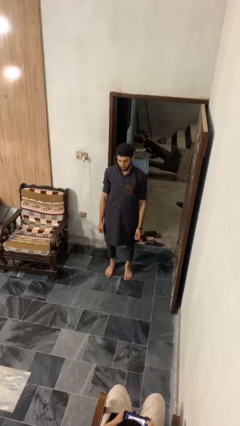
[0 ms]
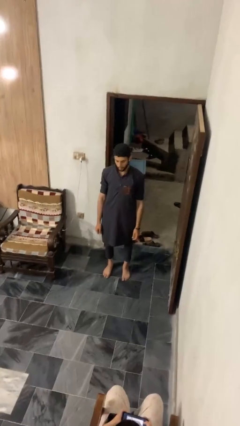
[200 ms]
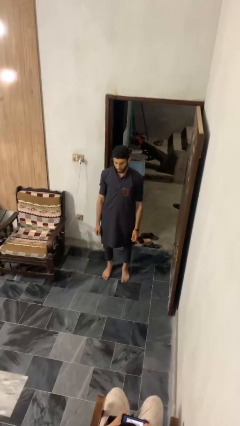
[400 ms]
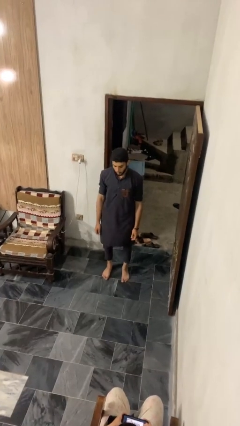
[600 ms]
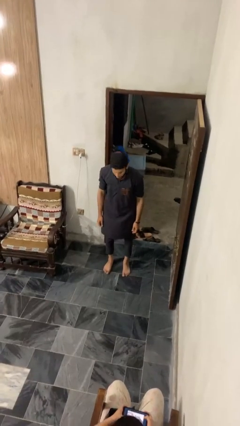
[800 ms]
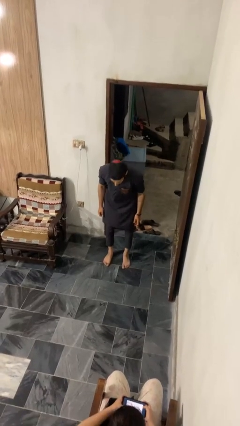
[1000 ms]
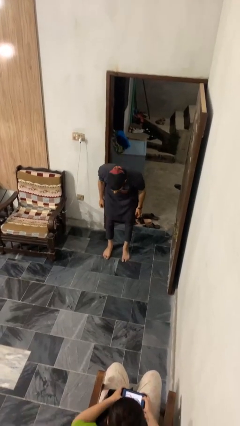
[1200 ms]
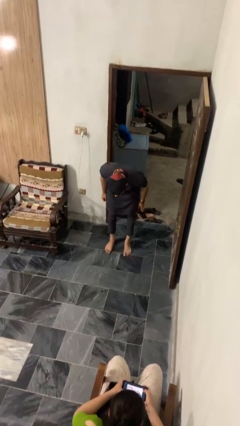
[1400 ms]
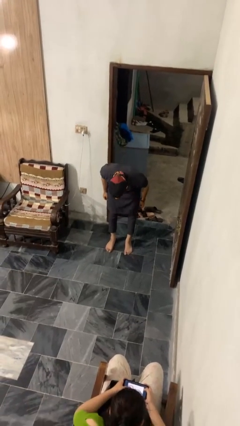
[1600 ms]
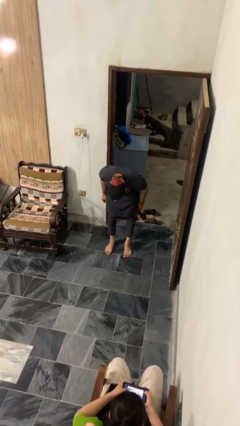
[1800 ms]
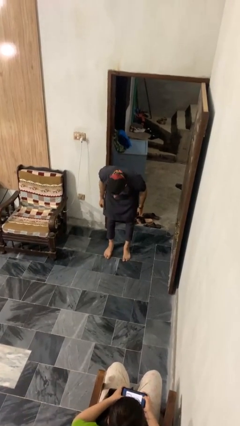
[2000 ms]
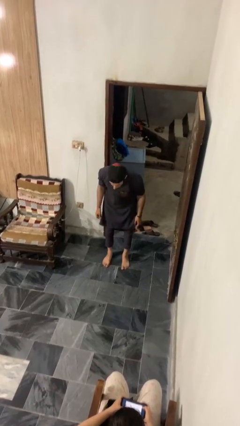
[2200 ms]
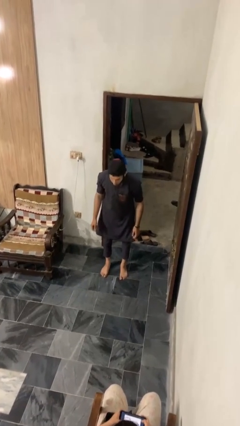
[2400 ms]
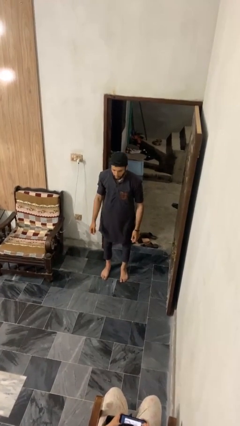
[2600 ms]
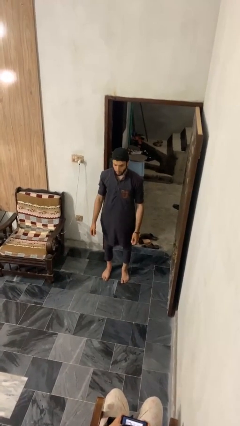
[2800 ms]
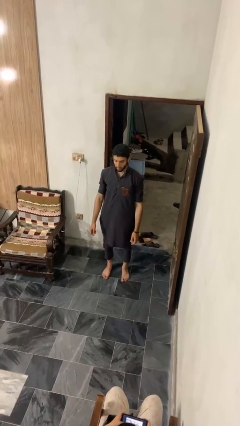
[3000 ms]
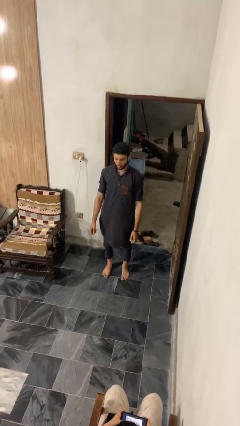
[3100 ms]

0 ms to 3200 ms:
person bows

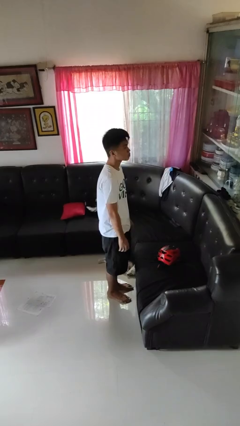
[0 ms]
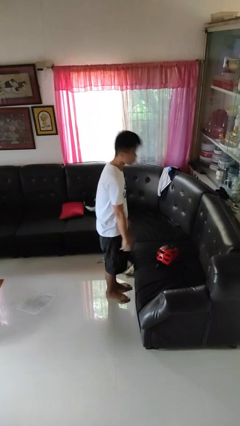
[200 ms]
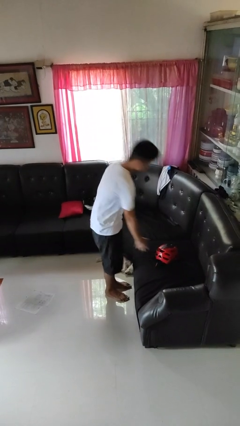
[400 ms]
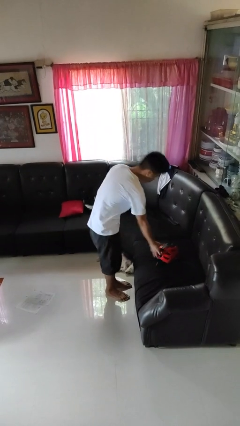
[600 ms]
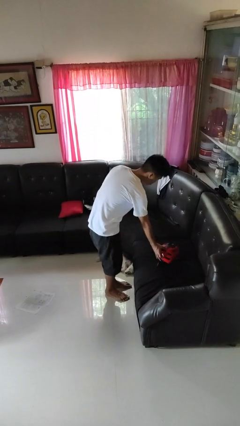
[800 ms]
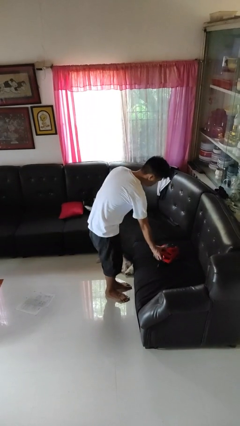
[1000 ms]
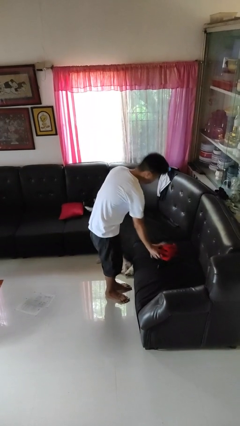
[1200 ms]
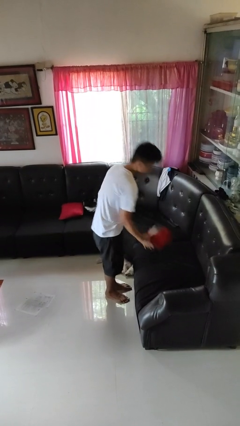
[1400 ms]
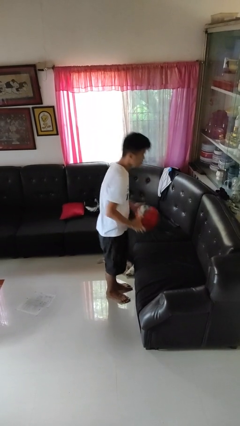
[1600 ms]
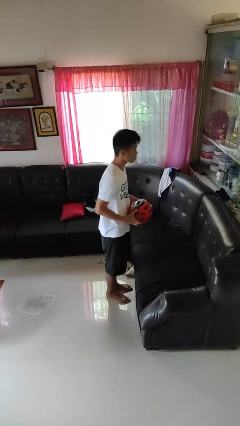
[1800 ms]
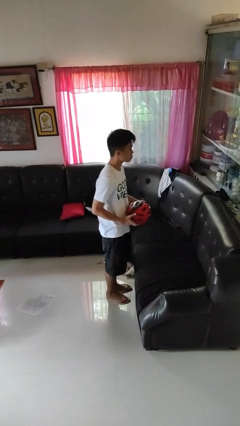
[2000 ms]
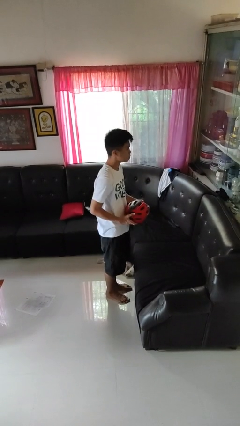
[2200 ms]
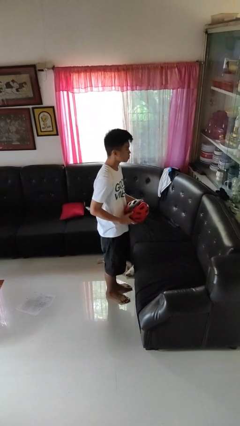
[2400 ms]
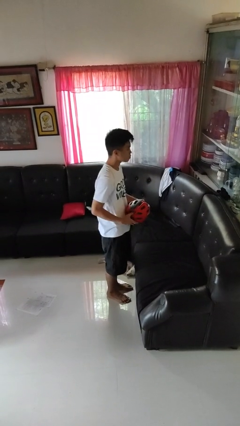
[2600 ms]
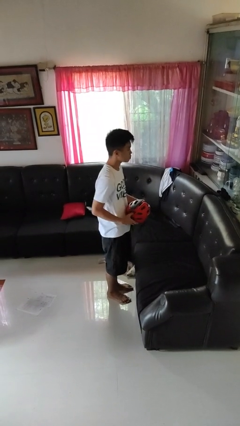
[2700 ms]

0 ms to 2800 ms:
person picks up object from couch

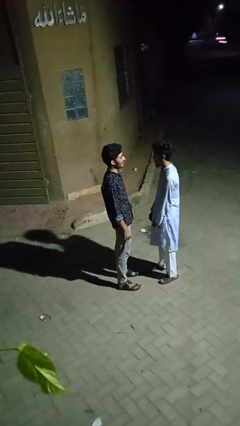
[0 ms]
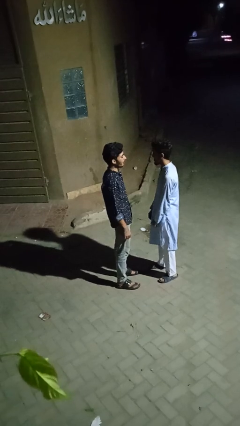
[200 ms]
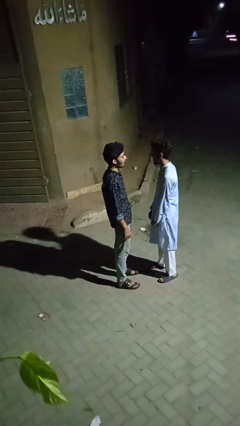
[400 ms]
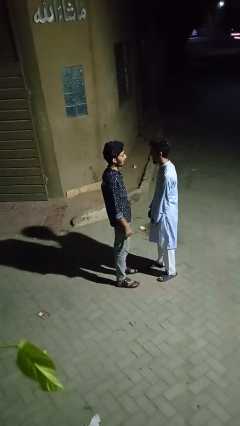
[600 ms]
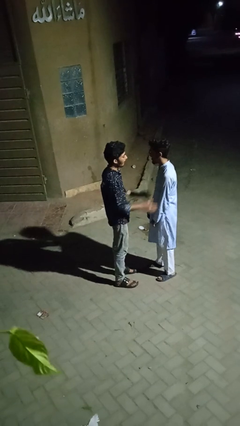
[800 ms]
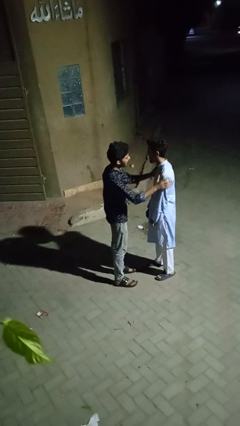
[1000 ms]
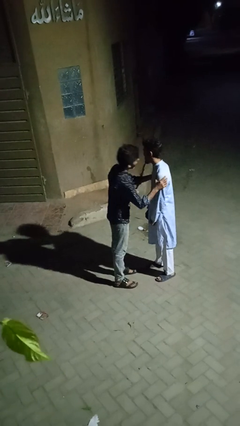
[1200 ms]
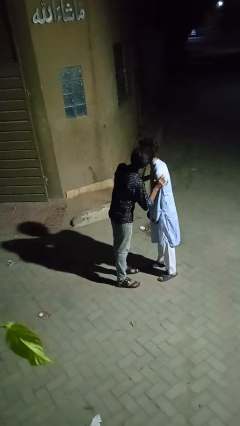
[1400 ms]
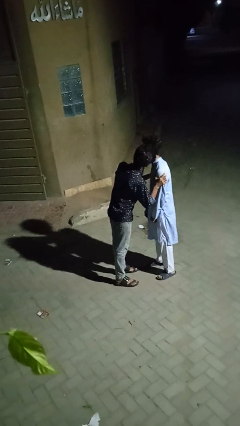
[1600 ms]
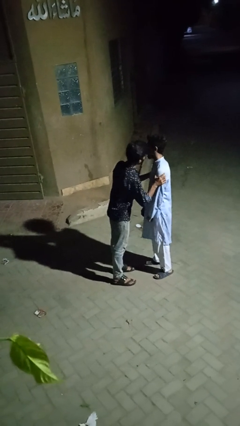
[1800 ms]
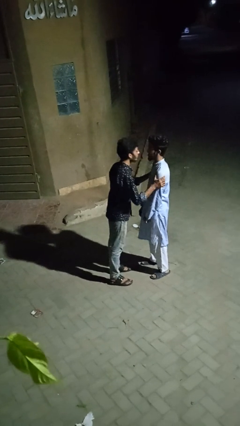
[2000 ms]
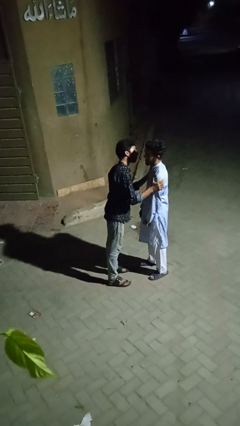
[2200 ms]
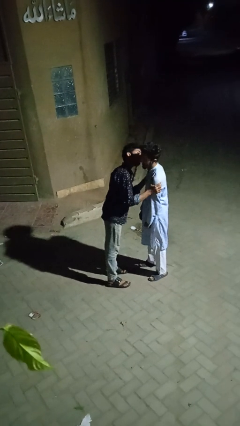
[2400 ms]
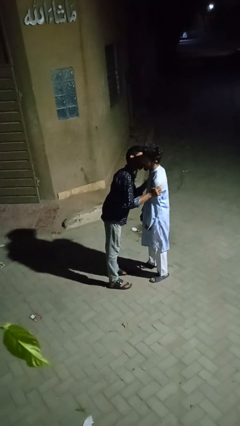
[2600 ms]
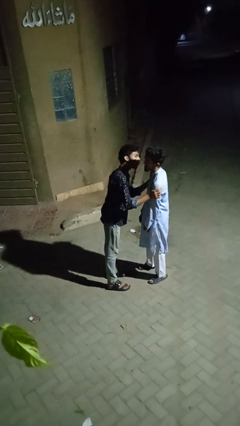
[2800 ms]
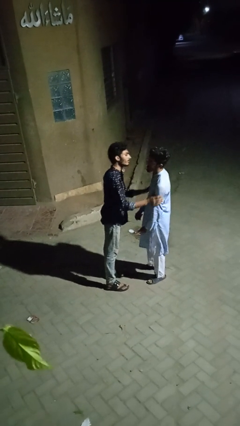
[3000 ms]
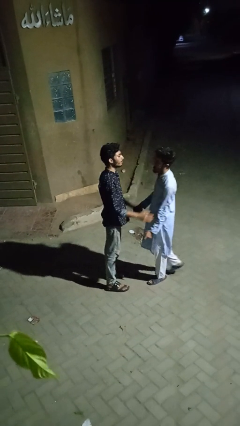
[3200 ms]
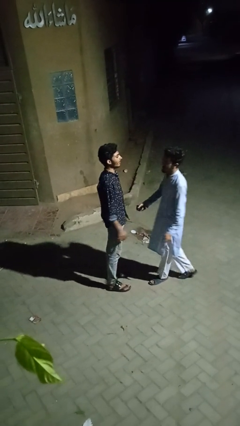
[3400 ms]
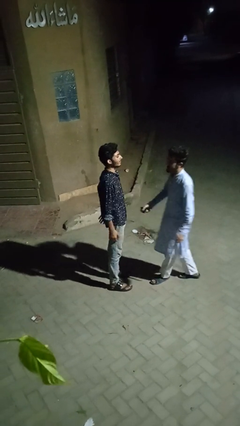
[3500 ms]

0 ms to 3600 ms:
person kisses cheek of person

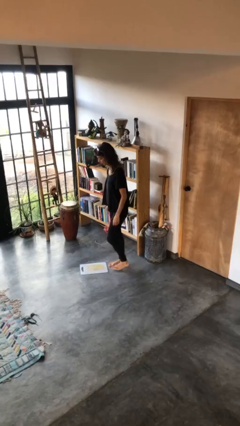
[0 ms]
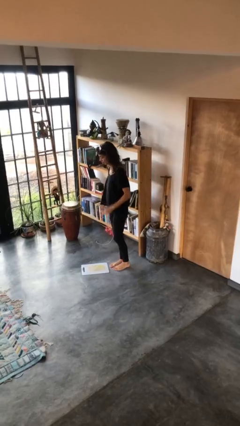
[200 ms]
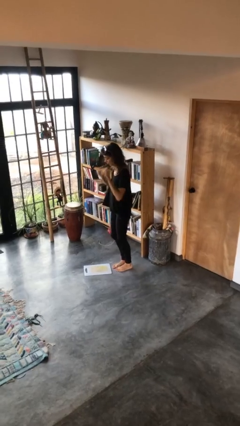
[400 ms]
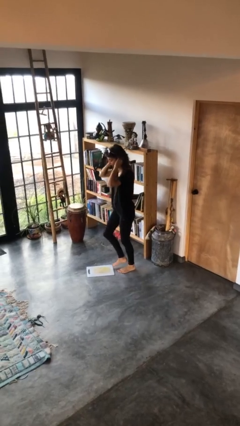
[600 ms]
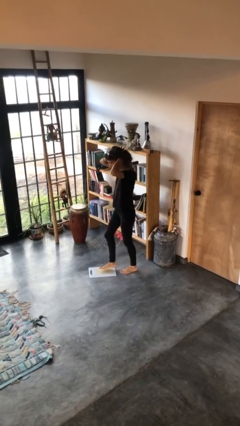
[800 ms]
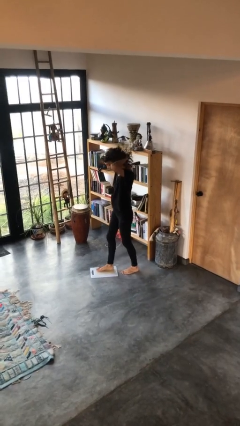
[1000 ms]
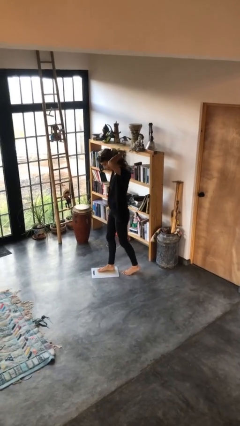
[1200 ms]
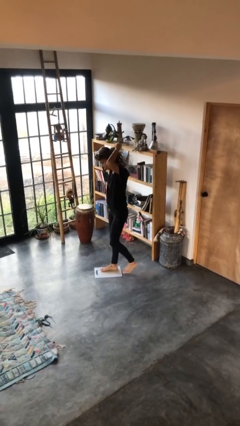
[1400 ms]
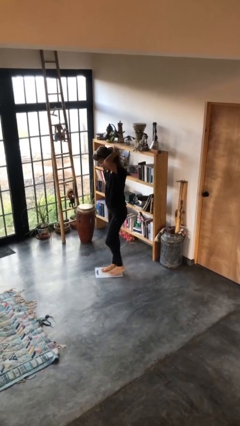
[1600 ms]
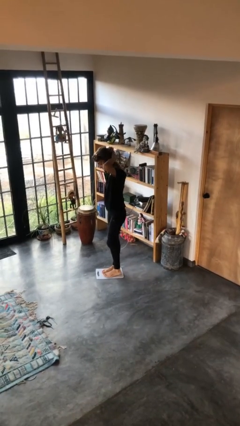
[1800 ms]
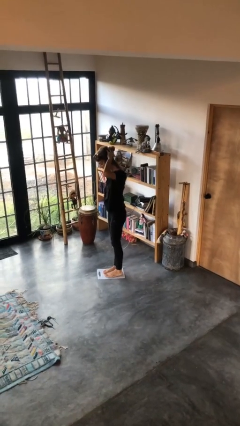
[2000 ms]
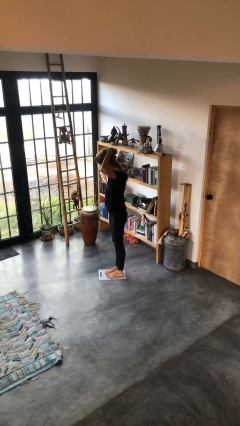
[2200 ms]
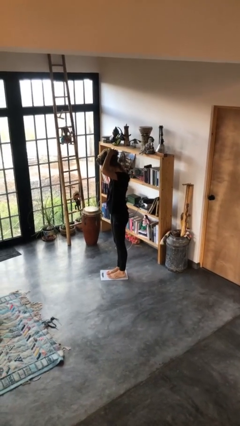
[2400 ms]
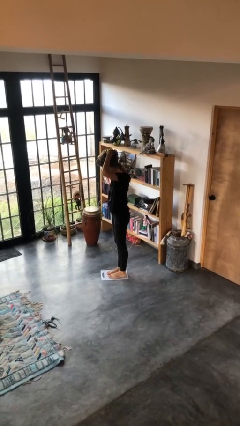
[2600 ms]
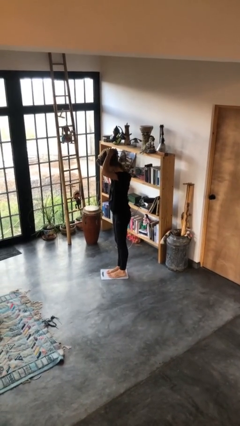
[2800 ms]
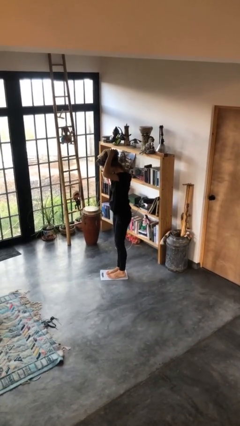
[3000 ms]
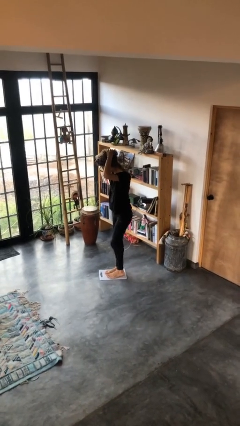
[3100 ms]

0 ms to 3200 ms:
person uses bodyweight scale

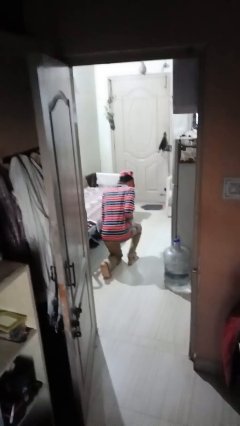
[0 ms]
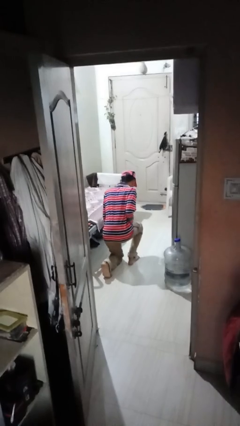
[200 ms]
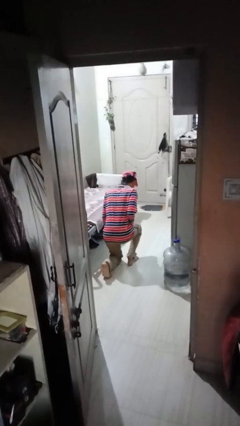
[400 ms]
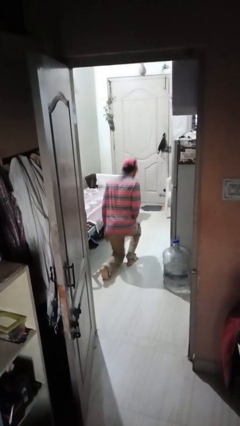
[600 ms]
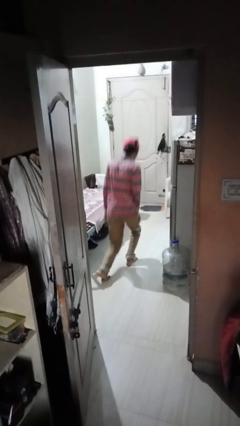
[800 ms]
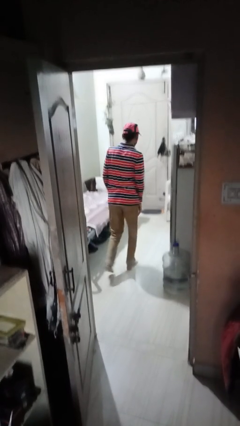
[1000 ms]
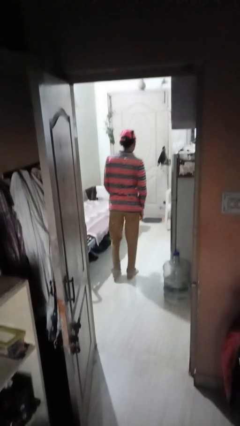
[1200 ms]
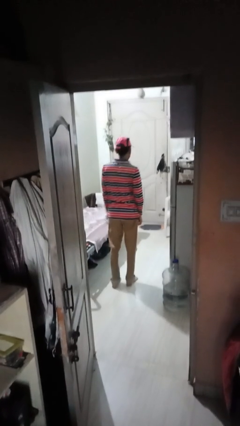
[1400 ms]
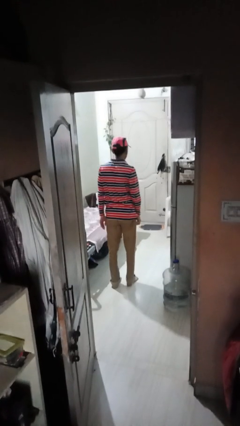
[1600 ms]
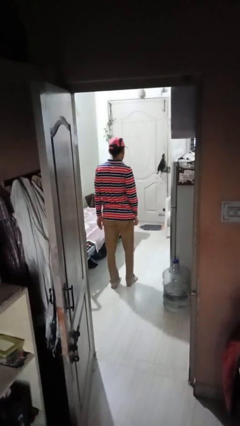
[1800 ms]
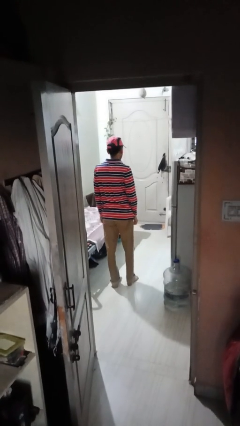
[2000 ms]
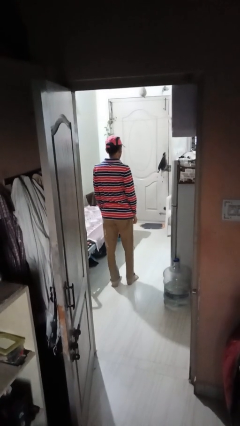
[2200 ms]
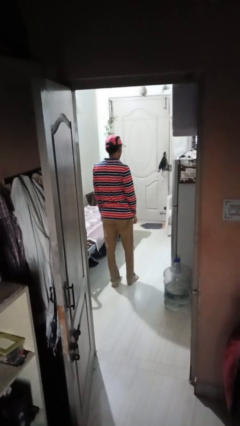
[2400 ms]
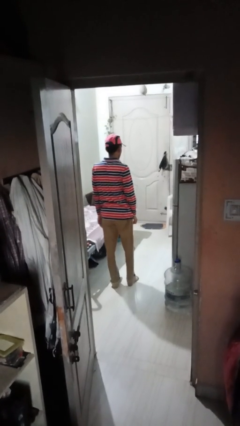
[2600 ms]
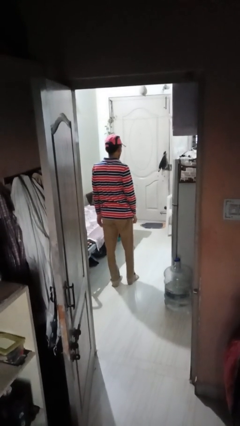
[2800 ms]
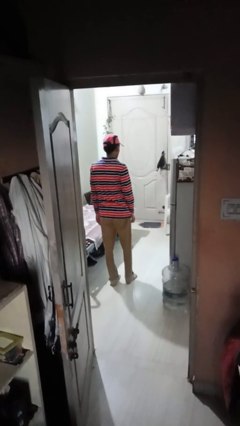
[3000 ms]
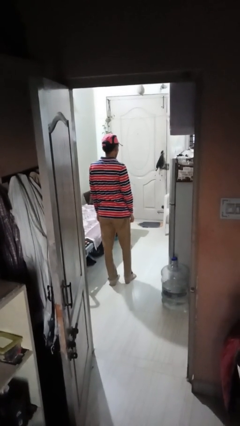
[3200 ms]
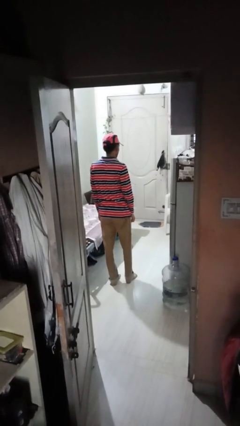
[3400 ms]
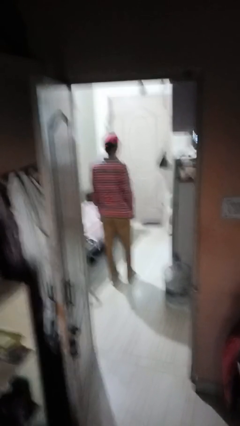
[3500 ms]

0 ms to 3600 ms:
person stands up from floor

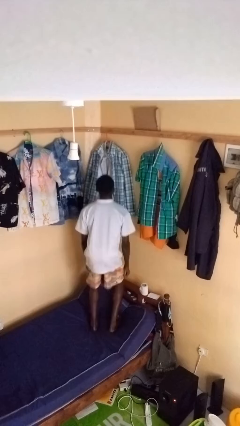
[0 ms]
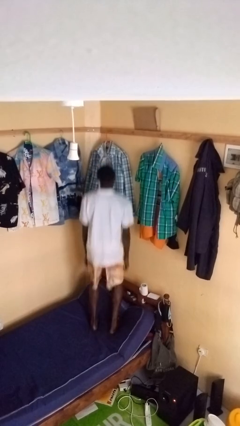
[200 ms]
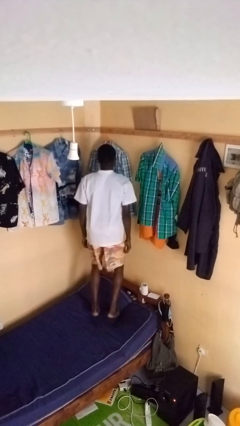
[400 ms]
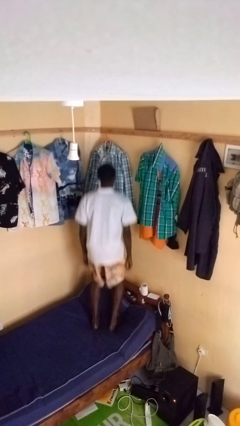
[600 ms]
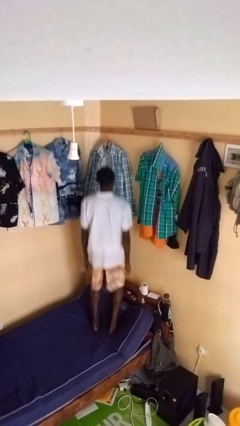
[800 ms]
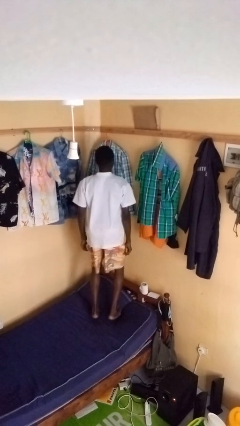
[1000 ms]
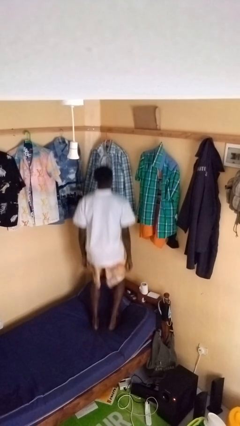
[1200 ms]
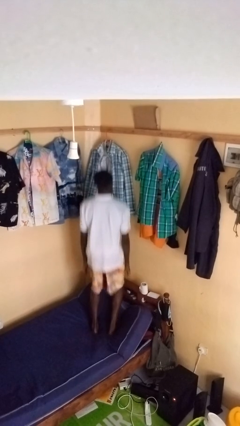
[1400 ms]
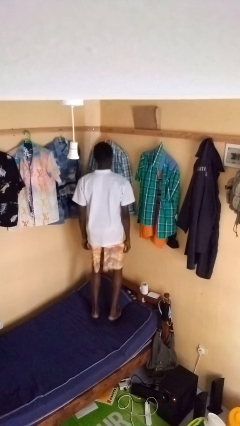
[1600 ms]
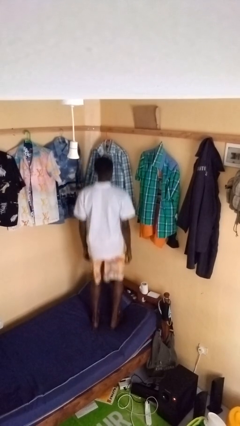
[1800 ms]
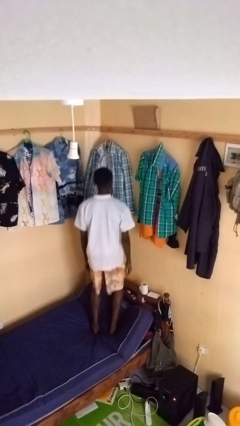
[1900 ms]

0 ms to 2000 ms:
person jumps on bed
